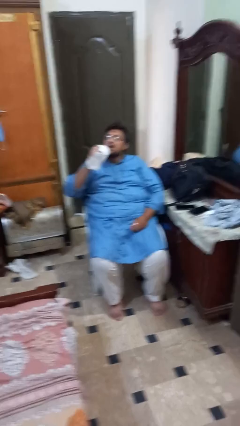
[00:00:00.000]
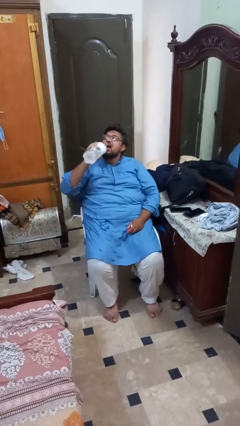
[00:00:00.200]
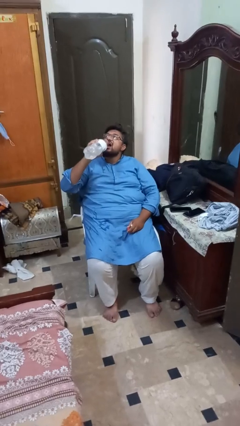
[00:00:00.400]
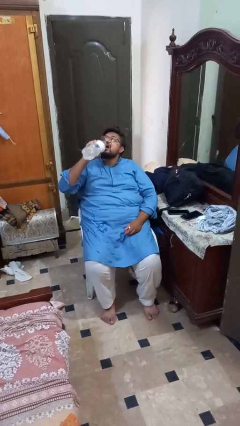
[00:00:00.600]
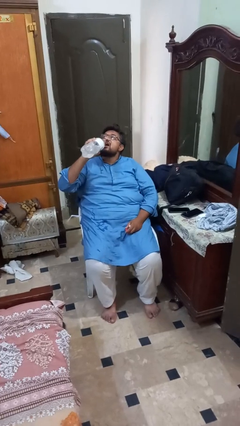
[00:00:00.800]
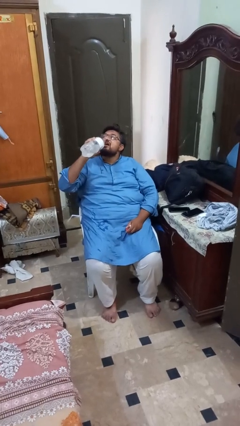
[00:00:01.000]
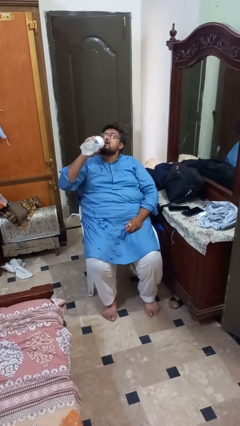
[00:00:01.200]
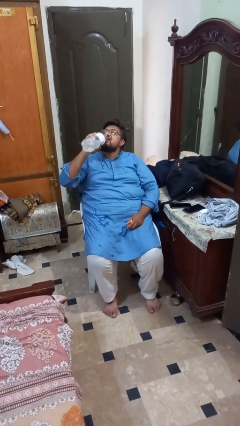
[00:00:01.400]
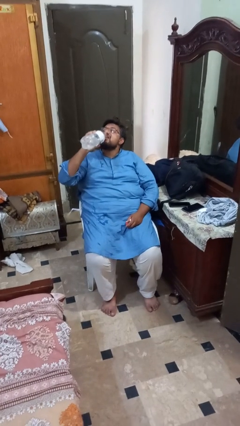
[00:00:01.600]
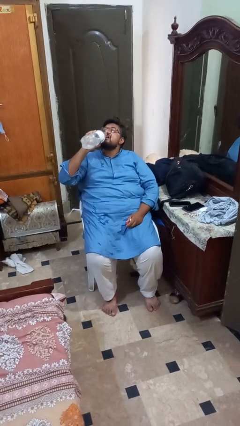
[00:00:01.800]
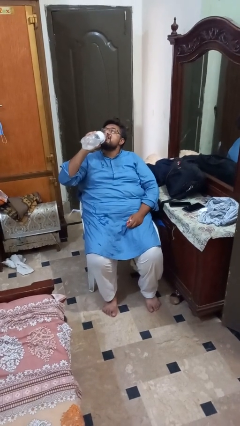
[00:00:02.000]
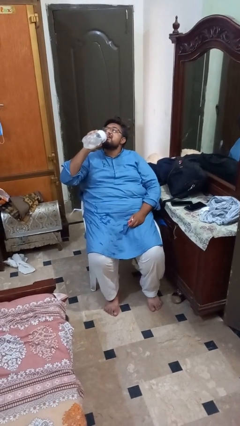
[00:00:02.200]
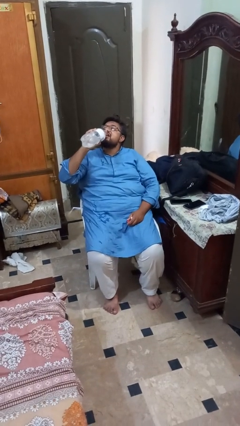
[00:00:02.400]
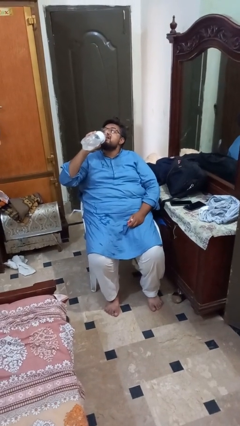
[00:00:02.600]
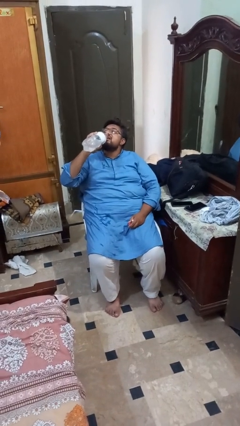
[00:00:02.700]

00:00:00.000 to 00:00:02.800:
person drinks from bottle

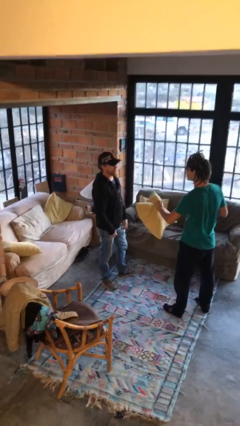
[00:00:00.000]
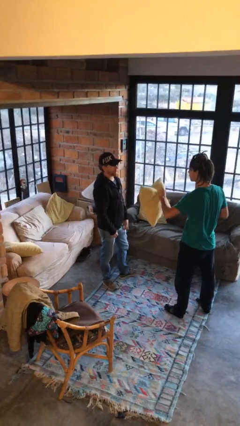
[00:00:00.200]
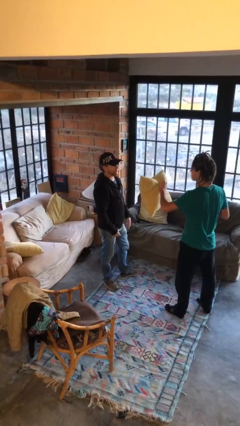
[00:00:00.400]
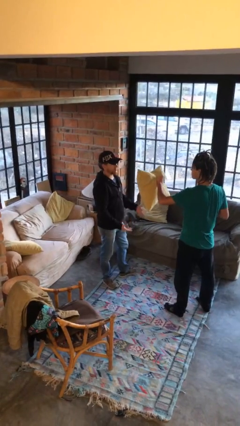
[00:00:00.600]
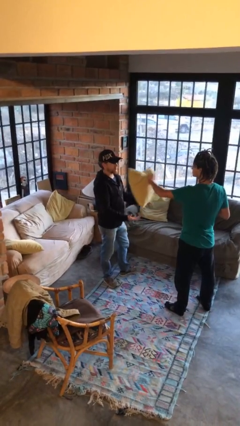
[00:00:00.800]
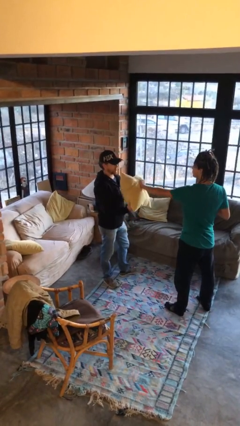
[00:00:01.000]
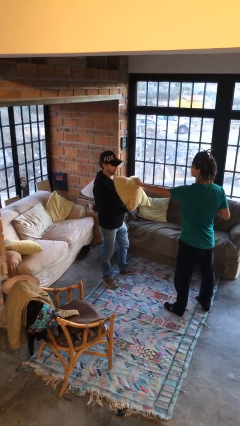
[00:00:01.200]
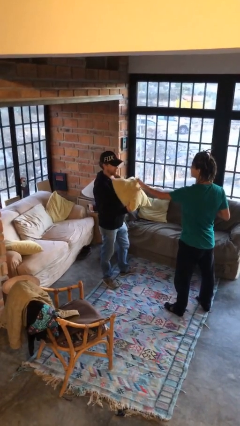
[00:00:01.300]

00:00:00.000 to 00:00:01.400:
person transfers object to person

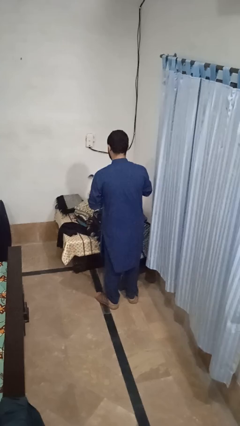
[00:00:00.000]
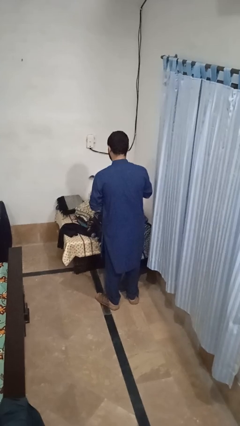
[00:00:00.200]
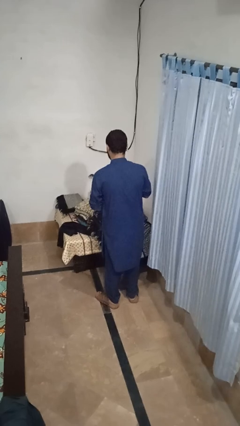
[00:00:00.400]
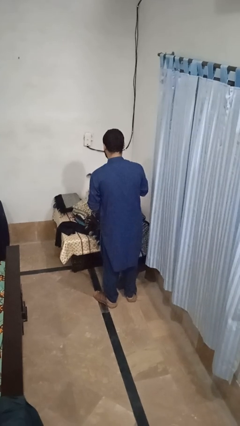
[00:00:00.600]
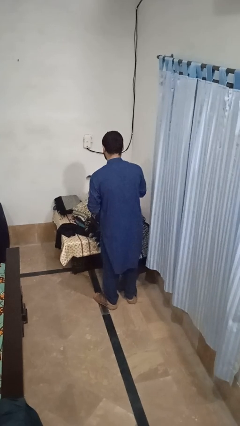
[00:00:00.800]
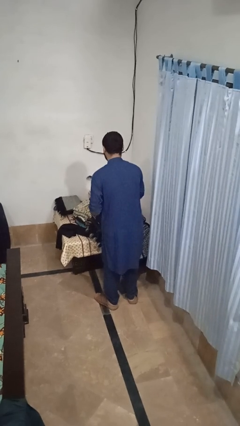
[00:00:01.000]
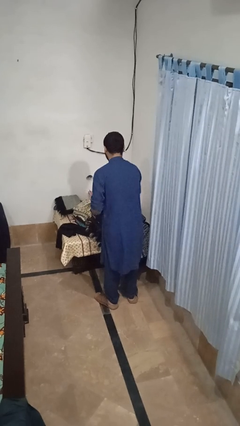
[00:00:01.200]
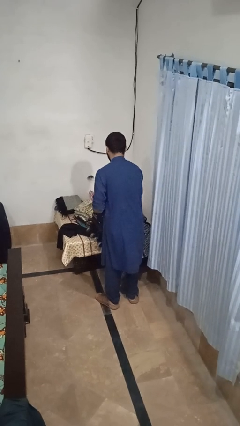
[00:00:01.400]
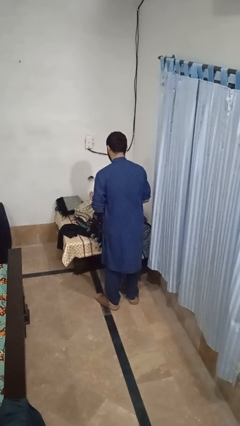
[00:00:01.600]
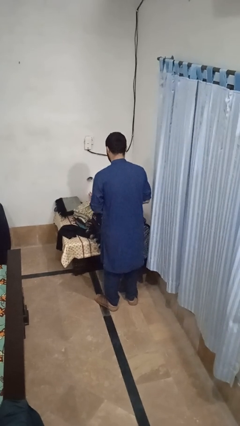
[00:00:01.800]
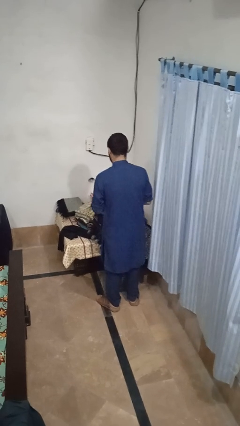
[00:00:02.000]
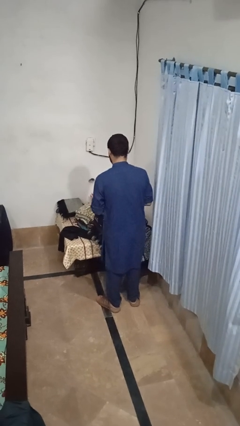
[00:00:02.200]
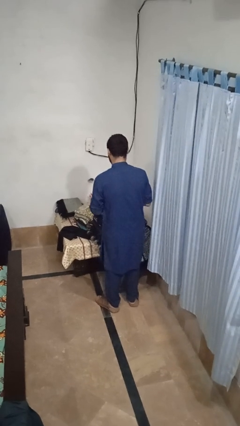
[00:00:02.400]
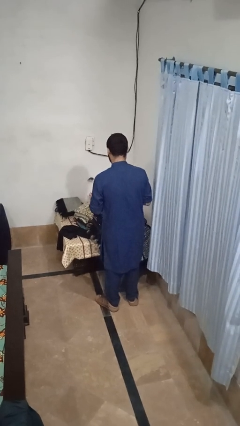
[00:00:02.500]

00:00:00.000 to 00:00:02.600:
person loads clothes into suitcase

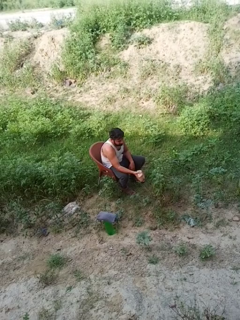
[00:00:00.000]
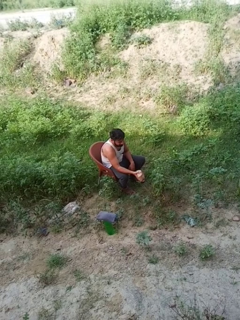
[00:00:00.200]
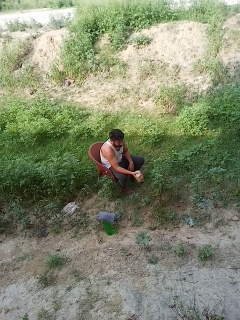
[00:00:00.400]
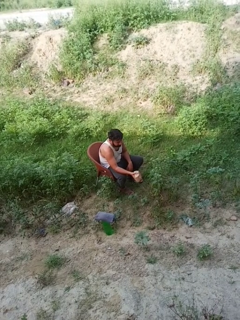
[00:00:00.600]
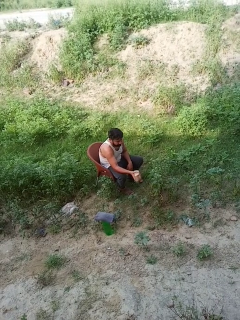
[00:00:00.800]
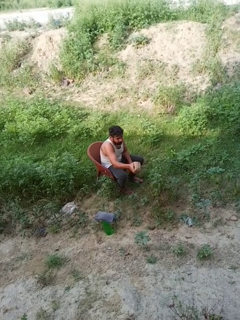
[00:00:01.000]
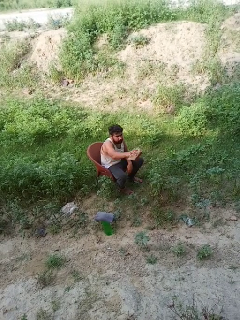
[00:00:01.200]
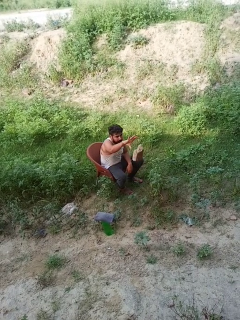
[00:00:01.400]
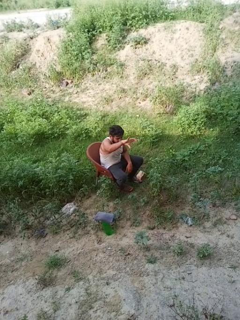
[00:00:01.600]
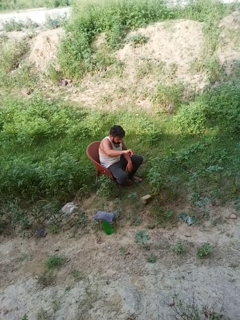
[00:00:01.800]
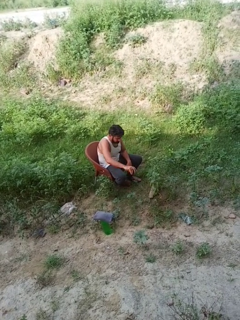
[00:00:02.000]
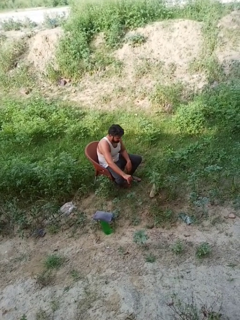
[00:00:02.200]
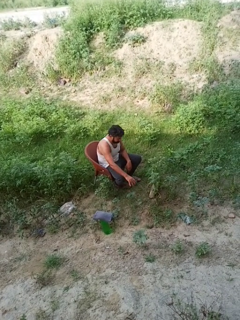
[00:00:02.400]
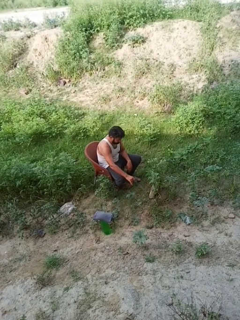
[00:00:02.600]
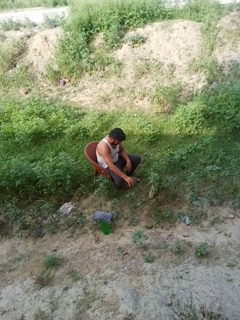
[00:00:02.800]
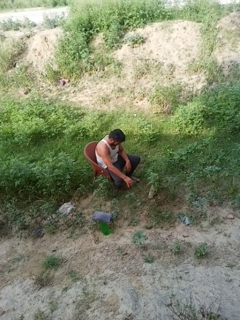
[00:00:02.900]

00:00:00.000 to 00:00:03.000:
person throws object to ground

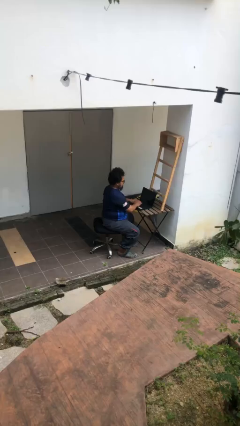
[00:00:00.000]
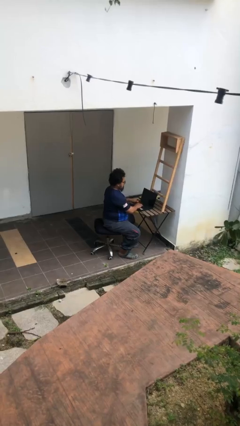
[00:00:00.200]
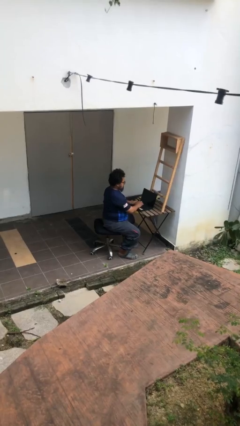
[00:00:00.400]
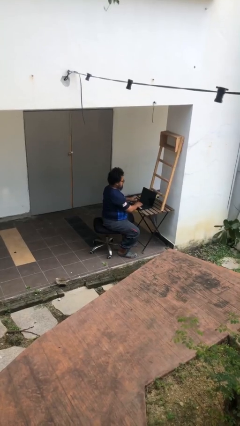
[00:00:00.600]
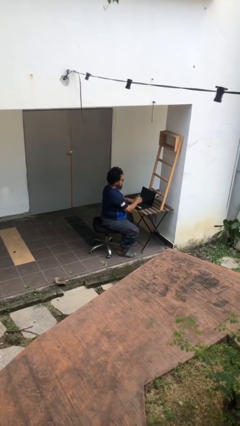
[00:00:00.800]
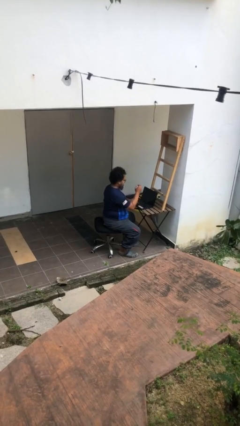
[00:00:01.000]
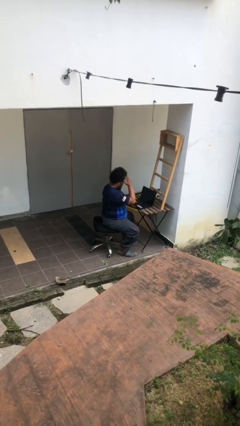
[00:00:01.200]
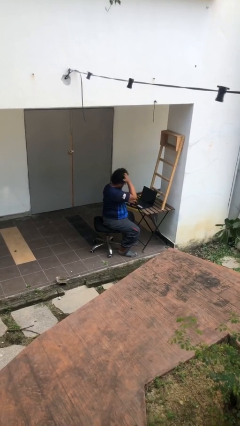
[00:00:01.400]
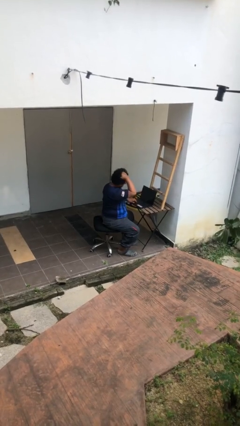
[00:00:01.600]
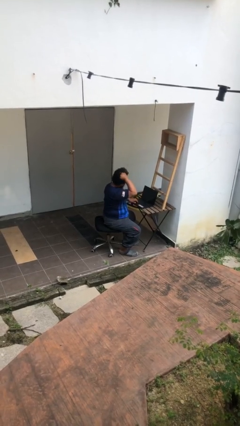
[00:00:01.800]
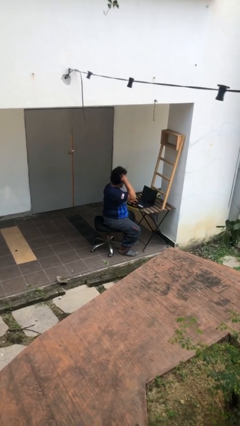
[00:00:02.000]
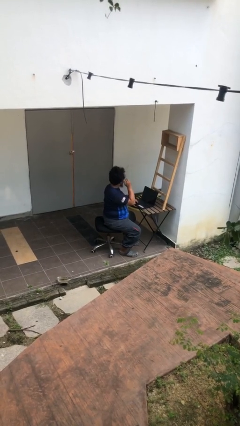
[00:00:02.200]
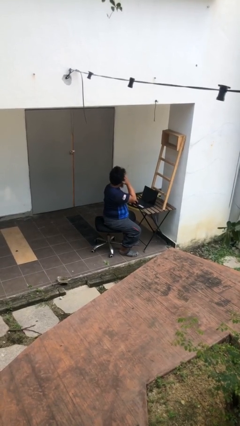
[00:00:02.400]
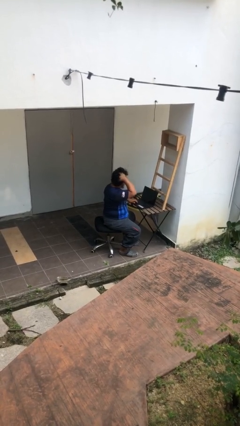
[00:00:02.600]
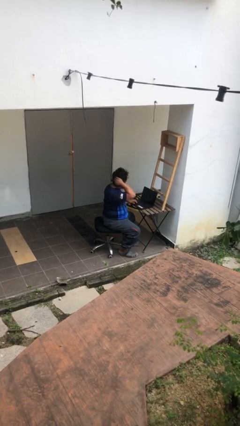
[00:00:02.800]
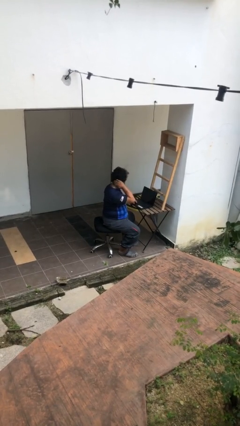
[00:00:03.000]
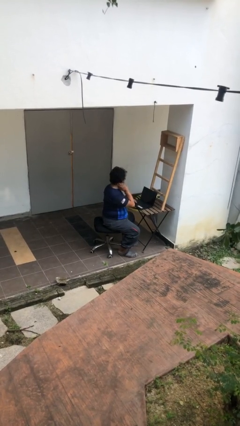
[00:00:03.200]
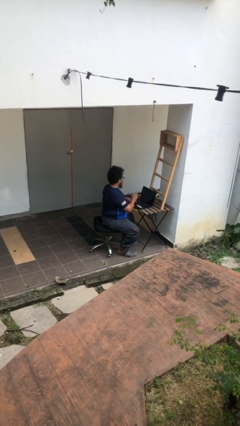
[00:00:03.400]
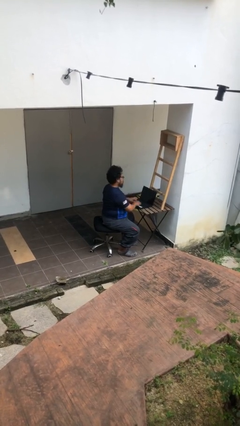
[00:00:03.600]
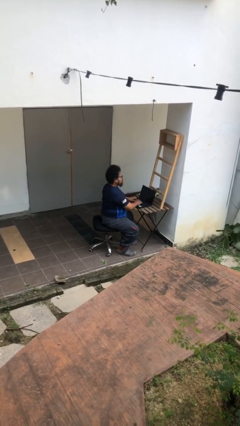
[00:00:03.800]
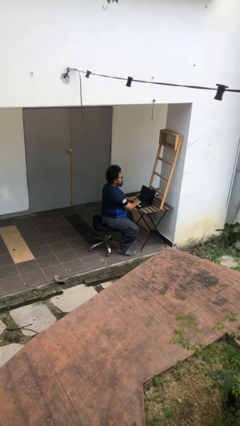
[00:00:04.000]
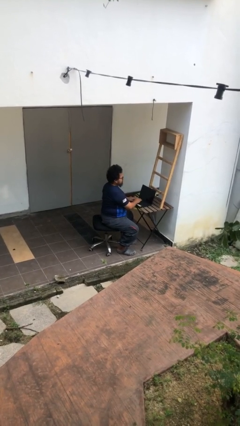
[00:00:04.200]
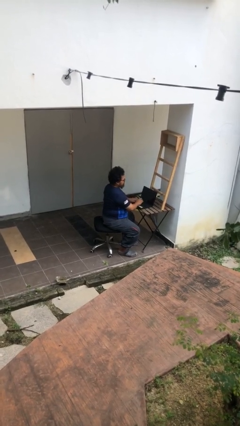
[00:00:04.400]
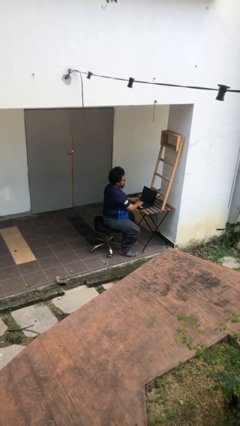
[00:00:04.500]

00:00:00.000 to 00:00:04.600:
person interacts with laptop

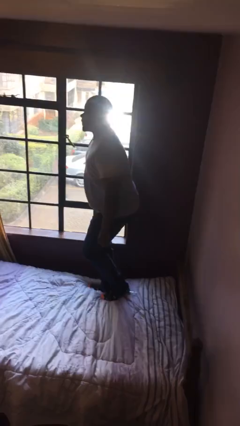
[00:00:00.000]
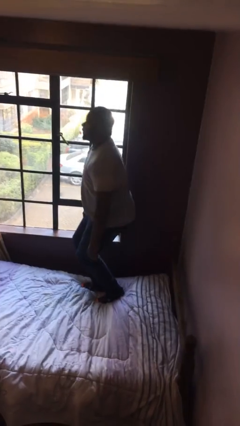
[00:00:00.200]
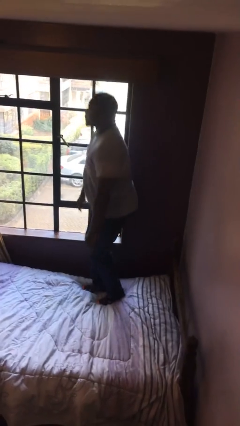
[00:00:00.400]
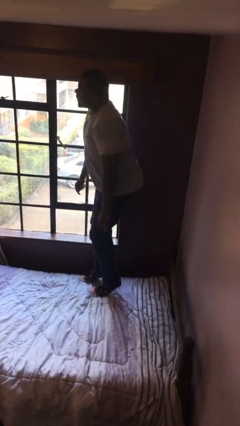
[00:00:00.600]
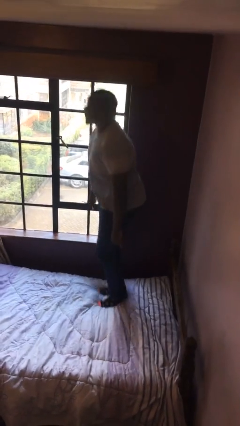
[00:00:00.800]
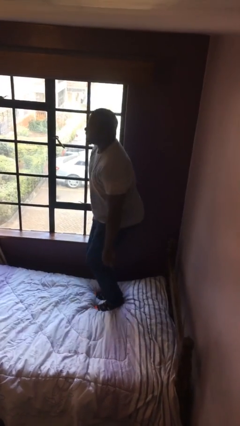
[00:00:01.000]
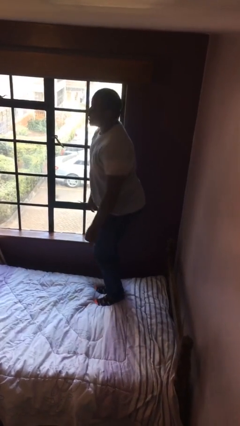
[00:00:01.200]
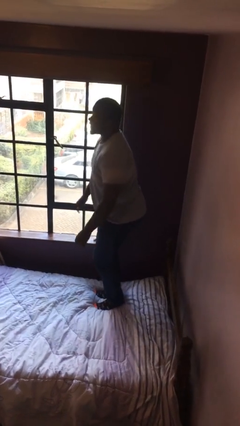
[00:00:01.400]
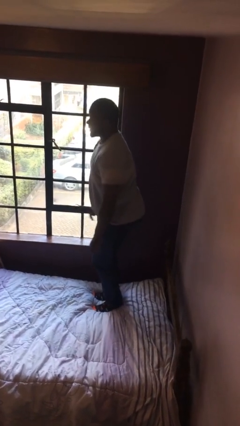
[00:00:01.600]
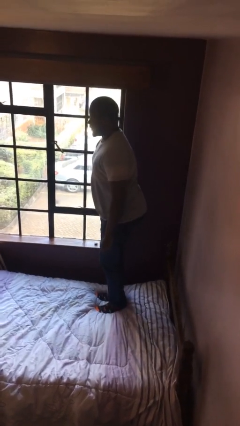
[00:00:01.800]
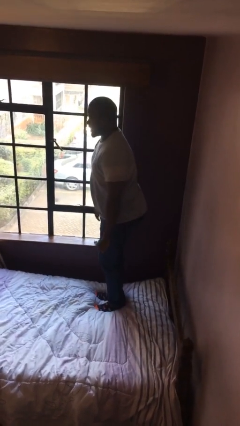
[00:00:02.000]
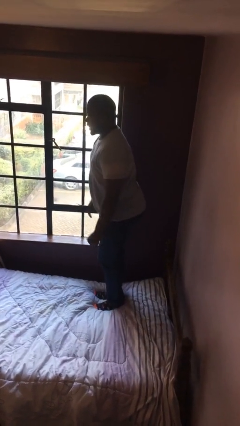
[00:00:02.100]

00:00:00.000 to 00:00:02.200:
person jumps on bed

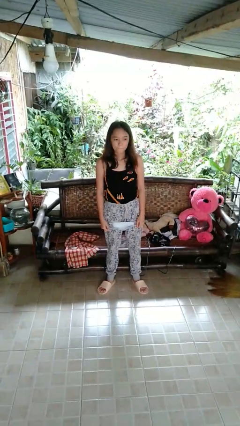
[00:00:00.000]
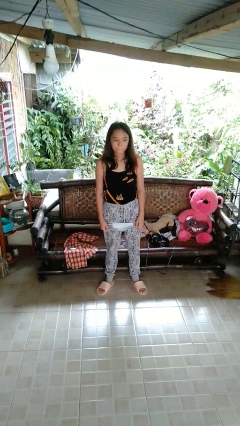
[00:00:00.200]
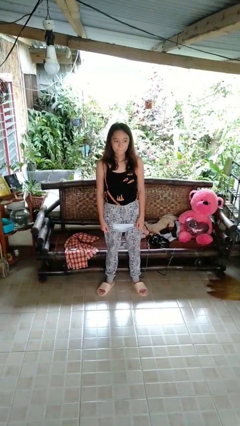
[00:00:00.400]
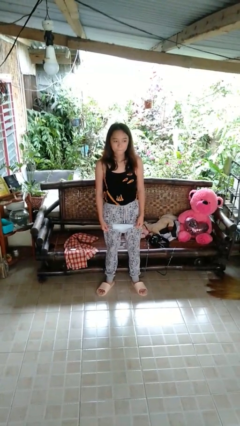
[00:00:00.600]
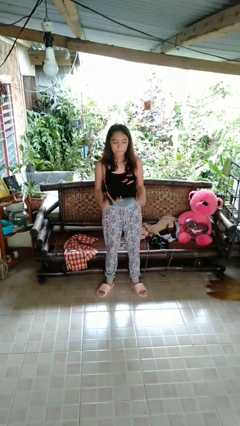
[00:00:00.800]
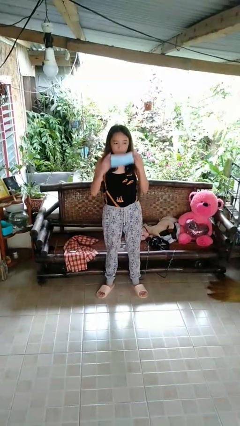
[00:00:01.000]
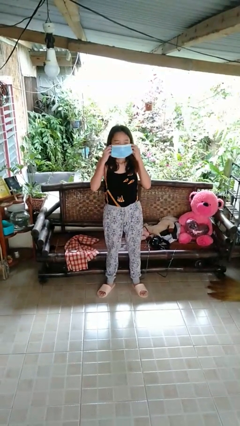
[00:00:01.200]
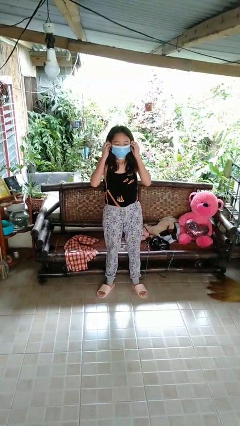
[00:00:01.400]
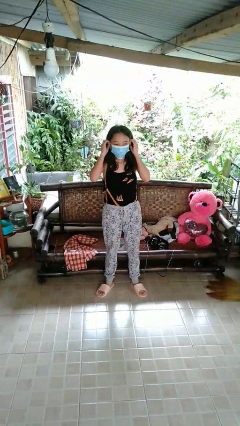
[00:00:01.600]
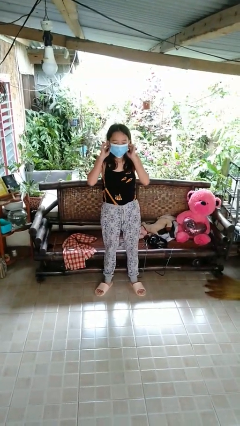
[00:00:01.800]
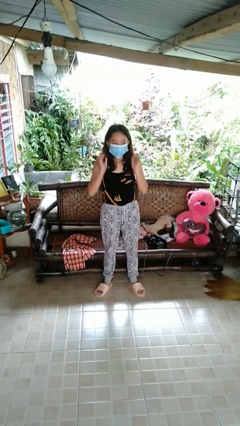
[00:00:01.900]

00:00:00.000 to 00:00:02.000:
person puts on facemask
